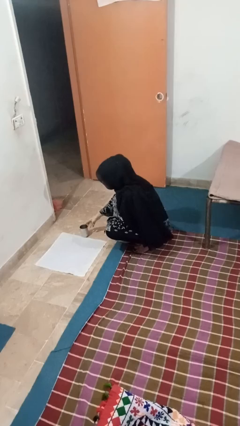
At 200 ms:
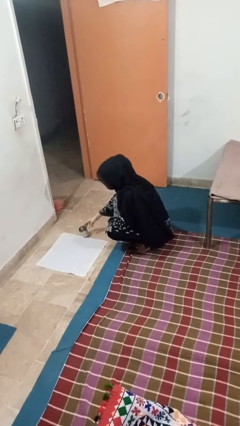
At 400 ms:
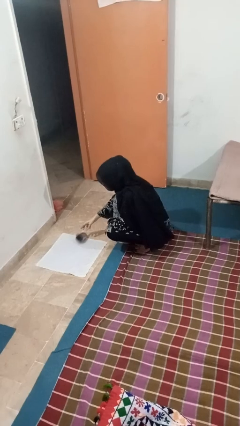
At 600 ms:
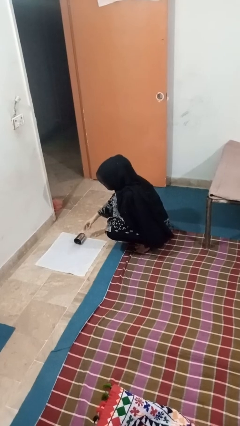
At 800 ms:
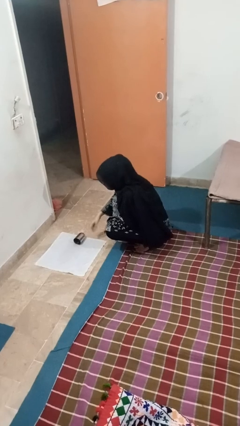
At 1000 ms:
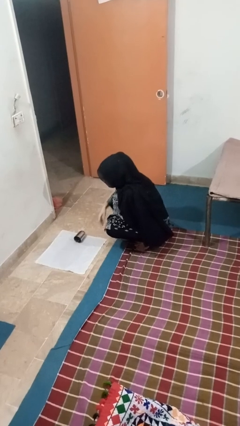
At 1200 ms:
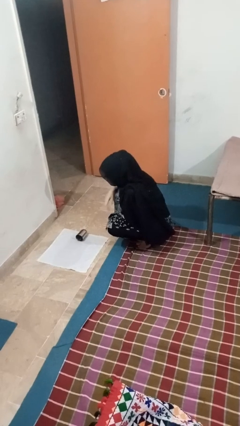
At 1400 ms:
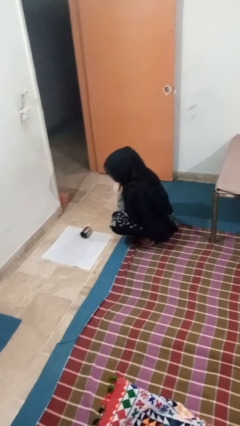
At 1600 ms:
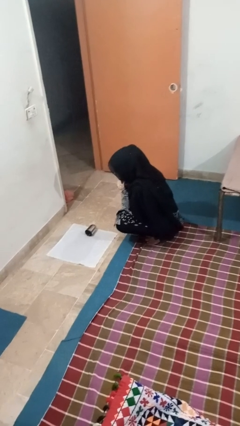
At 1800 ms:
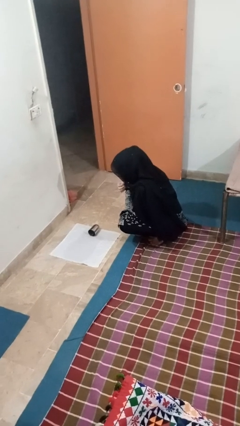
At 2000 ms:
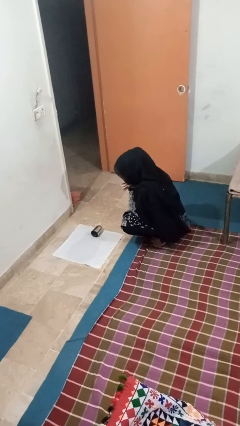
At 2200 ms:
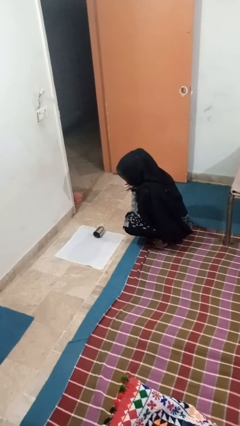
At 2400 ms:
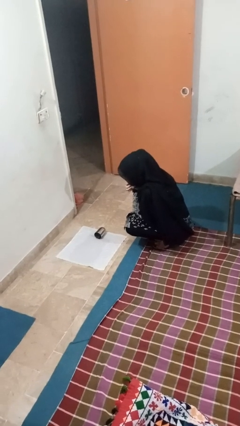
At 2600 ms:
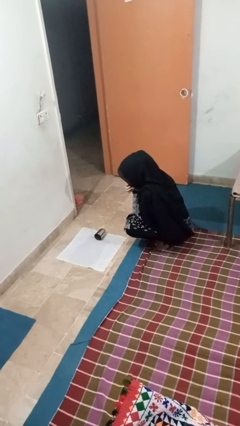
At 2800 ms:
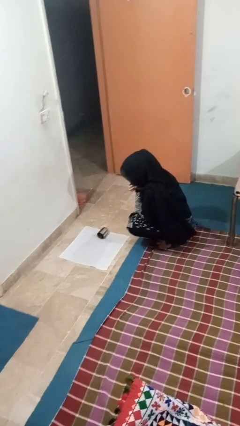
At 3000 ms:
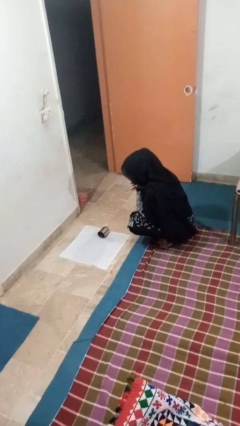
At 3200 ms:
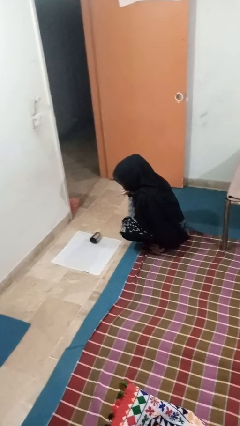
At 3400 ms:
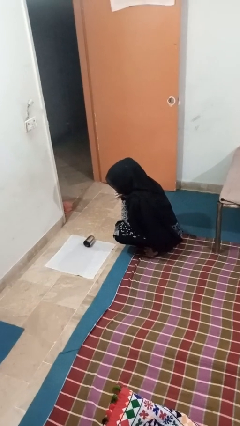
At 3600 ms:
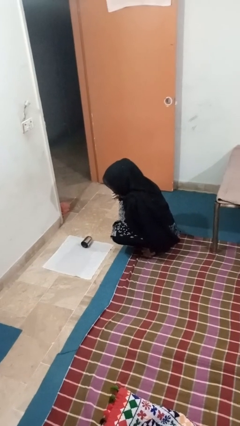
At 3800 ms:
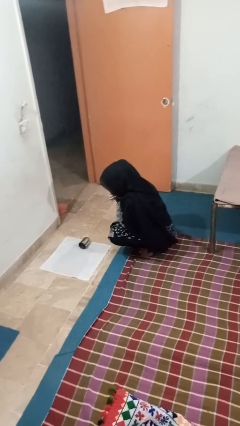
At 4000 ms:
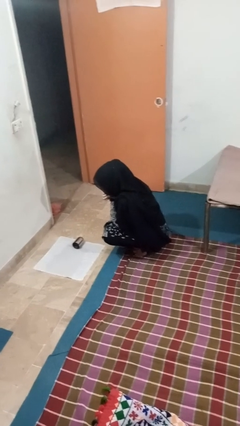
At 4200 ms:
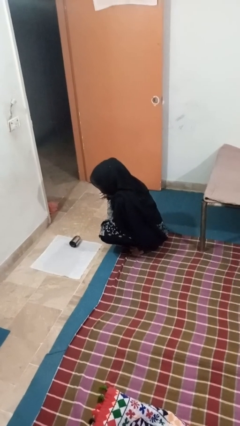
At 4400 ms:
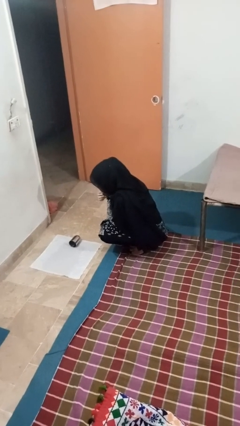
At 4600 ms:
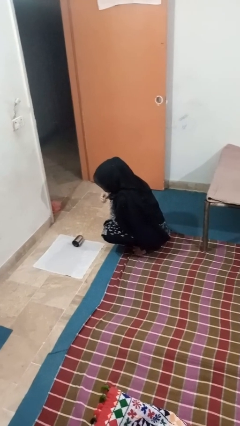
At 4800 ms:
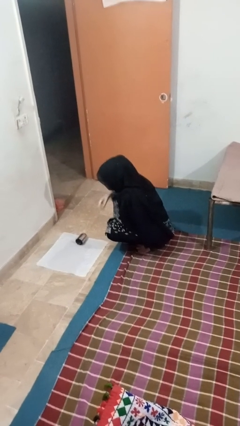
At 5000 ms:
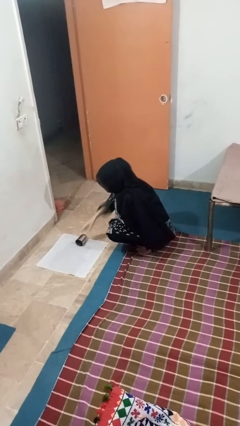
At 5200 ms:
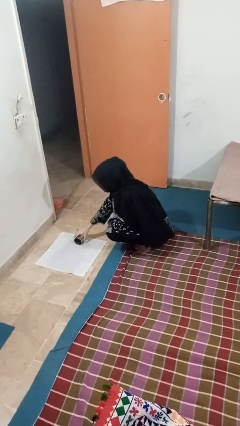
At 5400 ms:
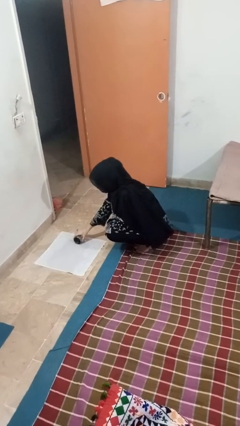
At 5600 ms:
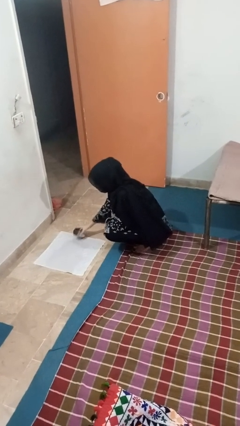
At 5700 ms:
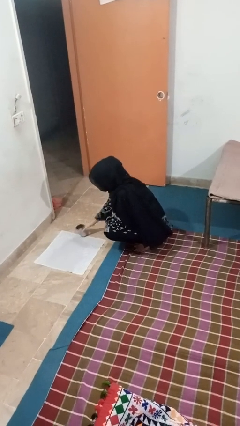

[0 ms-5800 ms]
person spills on floor

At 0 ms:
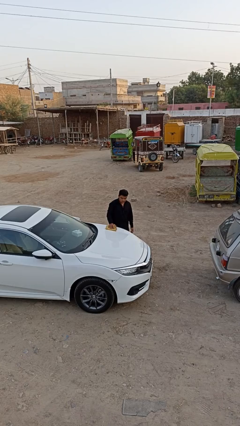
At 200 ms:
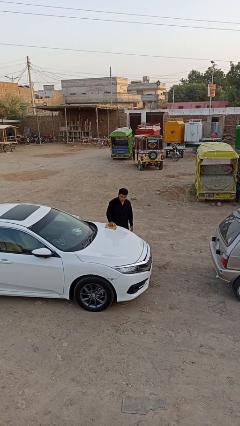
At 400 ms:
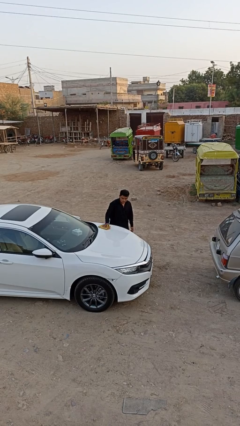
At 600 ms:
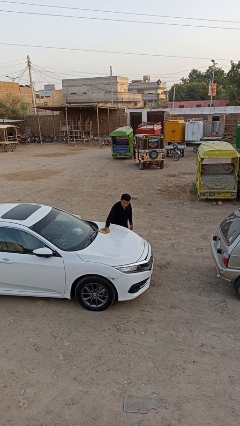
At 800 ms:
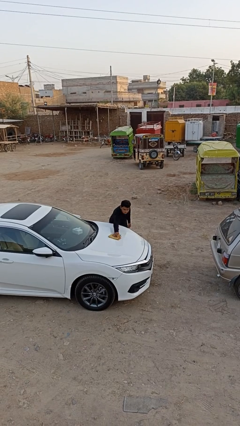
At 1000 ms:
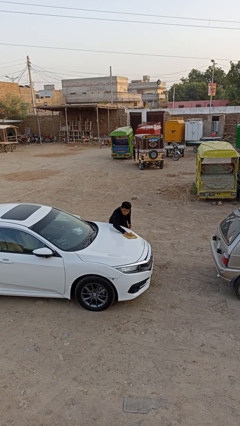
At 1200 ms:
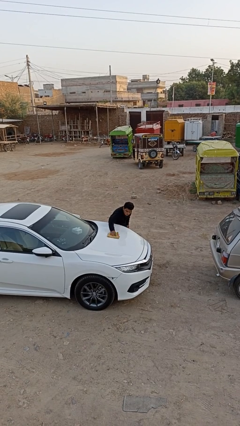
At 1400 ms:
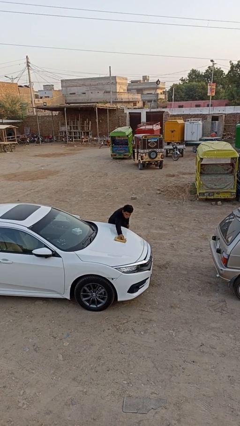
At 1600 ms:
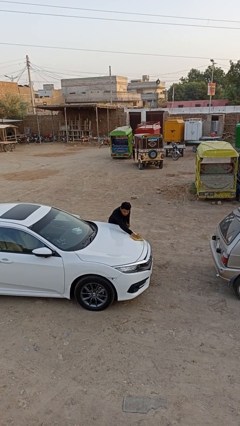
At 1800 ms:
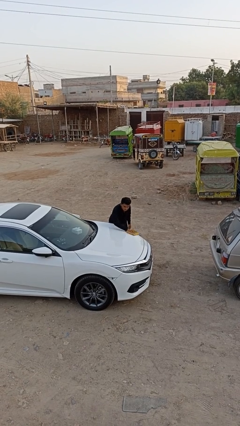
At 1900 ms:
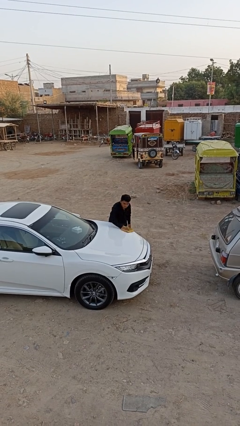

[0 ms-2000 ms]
person polishes car with rag

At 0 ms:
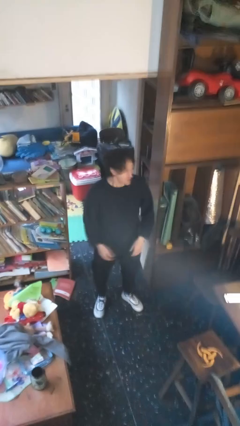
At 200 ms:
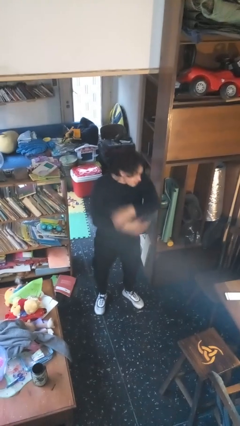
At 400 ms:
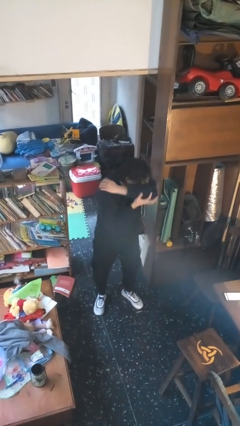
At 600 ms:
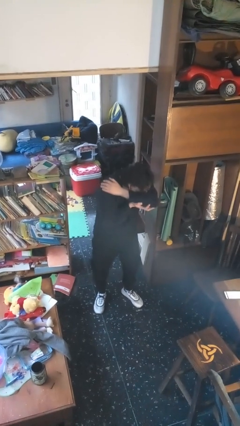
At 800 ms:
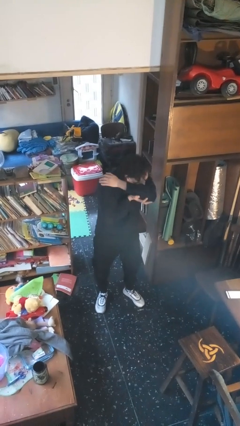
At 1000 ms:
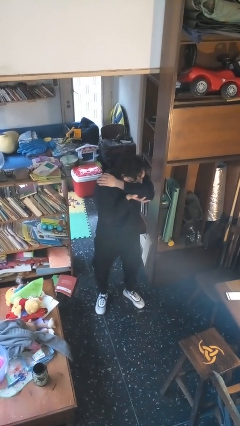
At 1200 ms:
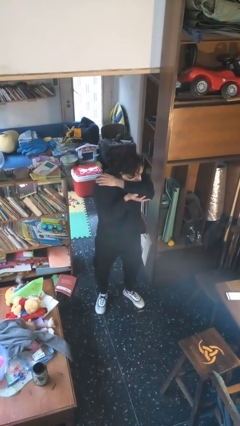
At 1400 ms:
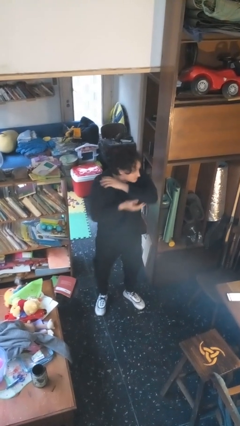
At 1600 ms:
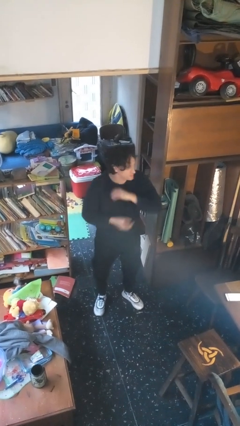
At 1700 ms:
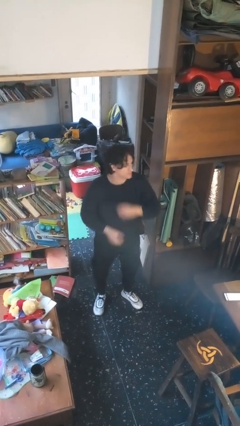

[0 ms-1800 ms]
person sneezes into arm

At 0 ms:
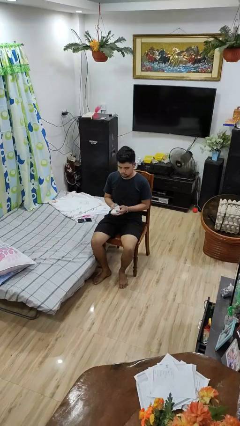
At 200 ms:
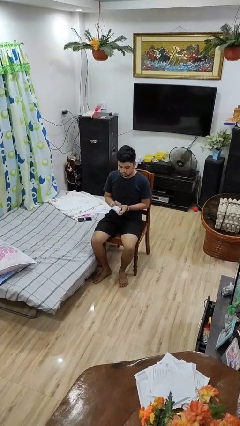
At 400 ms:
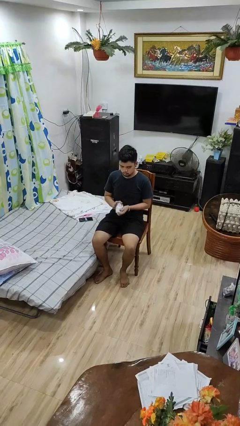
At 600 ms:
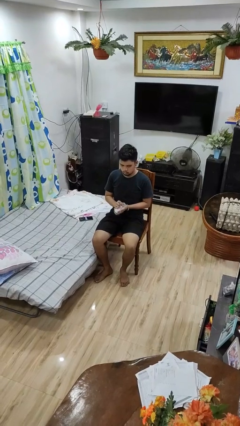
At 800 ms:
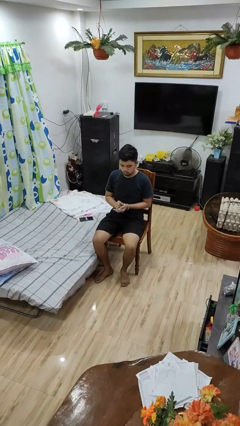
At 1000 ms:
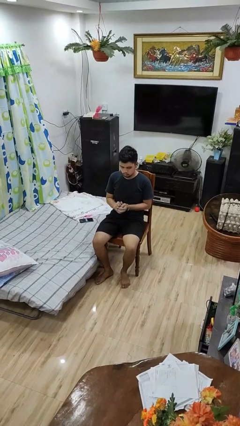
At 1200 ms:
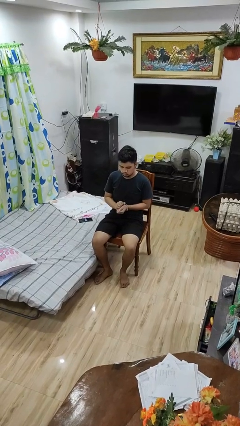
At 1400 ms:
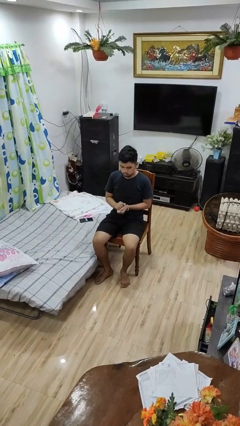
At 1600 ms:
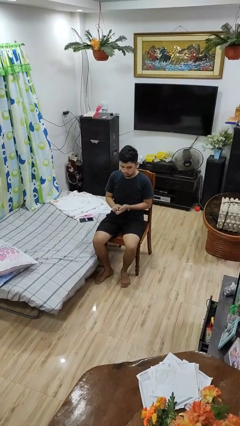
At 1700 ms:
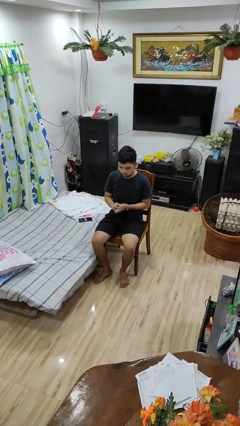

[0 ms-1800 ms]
person crumples paper

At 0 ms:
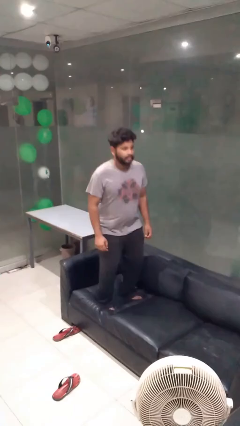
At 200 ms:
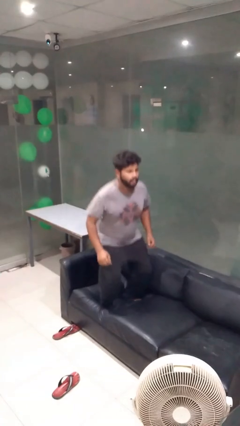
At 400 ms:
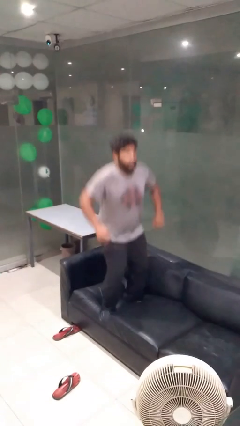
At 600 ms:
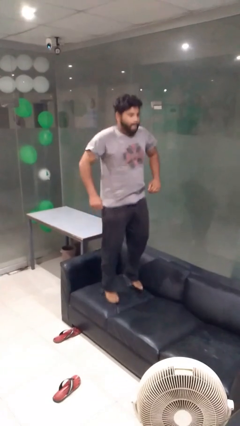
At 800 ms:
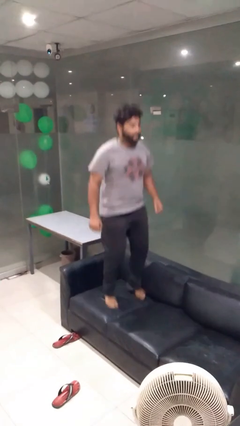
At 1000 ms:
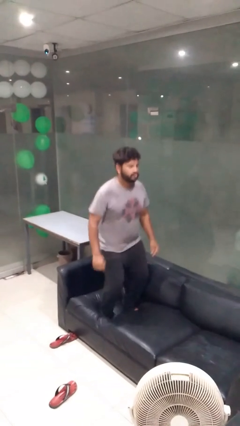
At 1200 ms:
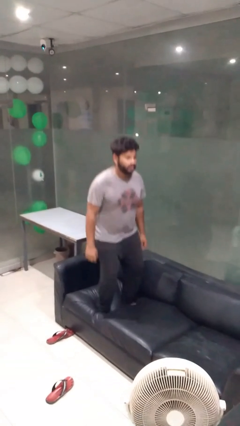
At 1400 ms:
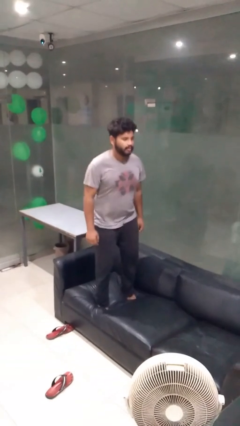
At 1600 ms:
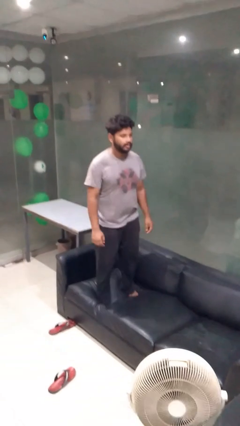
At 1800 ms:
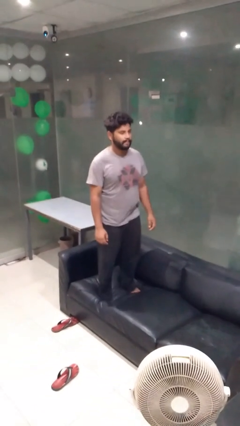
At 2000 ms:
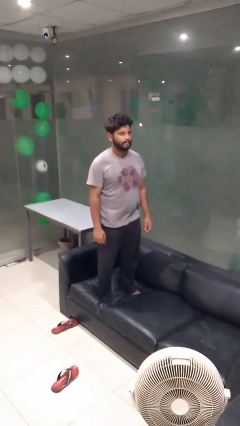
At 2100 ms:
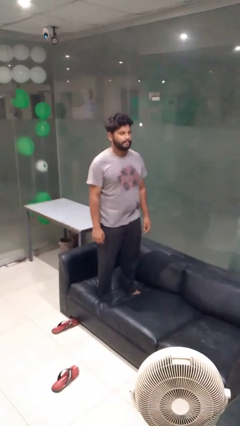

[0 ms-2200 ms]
person jumps on couch

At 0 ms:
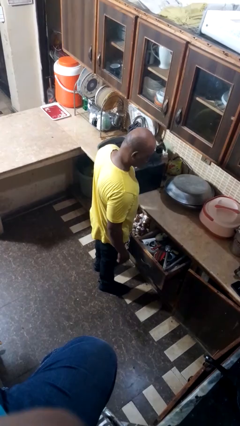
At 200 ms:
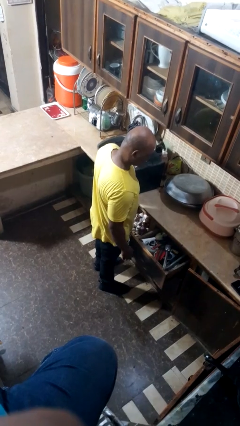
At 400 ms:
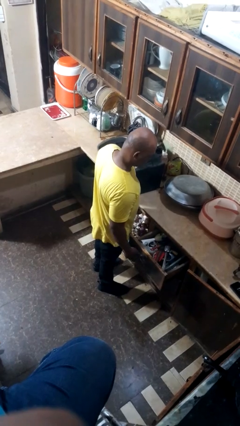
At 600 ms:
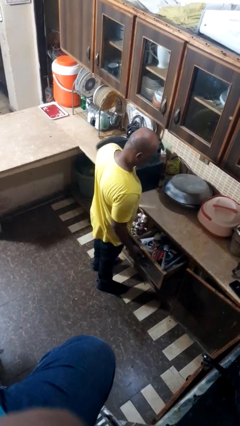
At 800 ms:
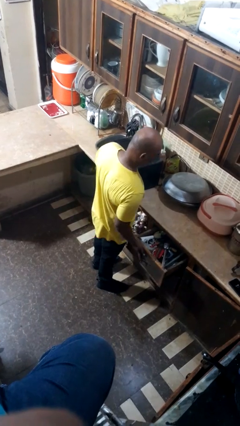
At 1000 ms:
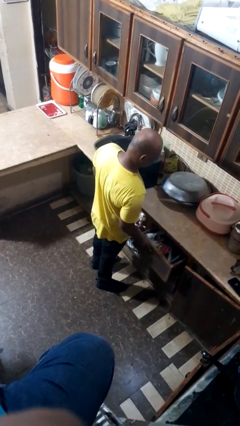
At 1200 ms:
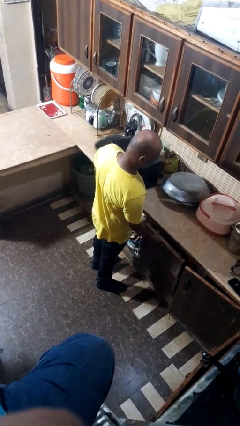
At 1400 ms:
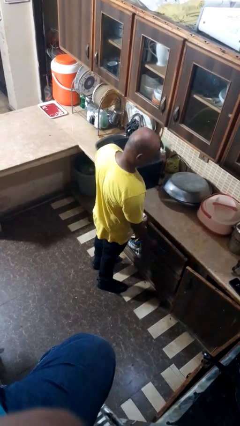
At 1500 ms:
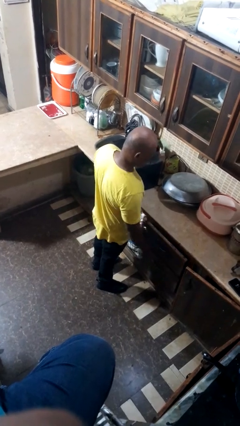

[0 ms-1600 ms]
person closes dresser drawer

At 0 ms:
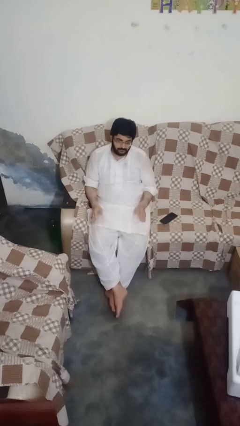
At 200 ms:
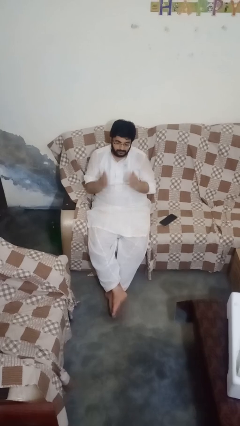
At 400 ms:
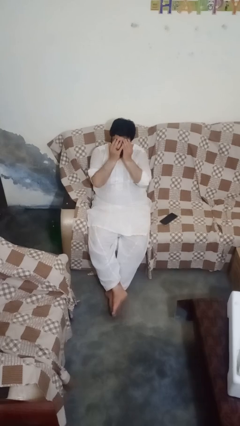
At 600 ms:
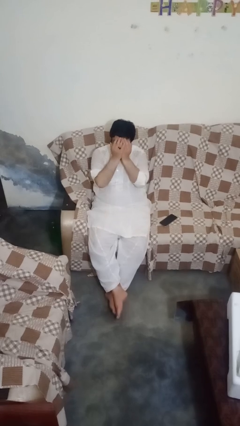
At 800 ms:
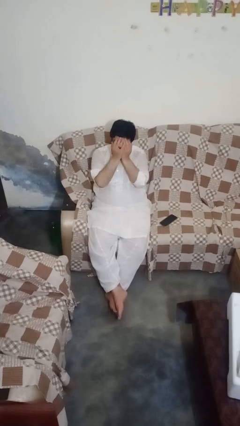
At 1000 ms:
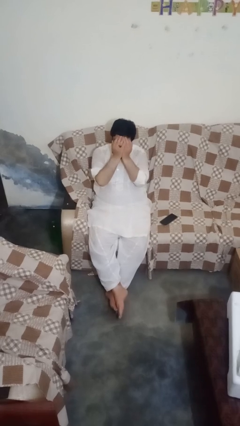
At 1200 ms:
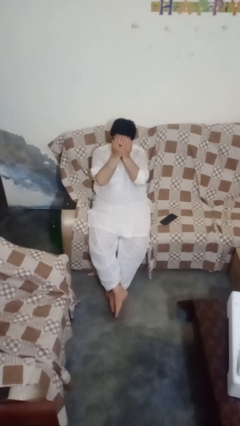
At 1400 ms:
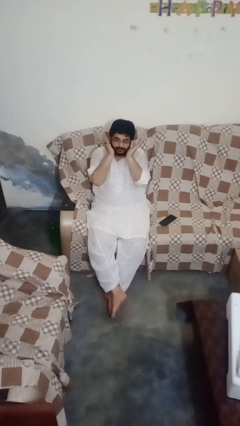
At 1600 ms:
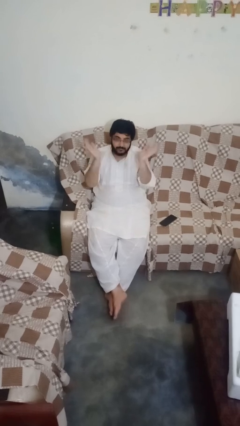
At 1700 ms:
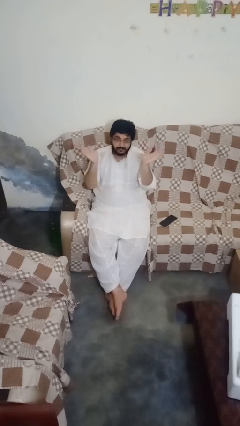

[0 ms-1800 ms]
person covers face with hands
